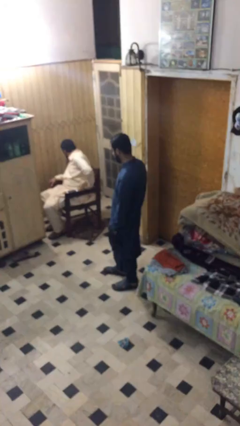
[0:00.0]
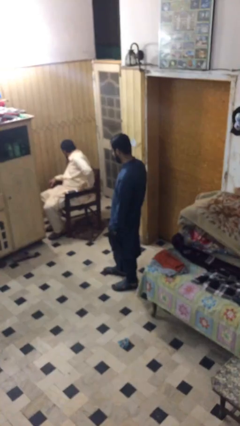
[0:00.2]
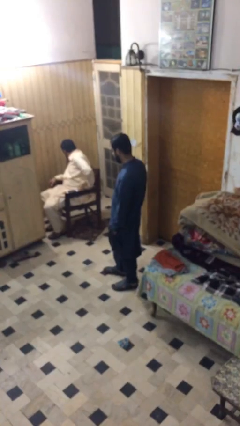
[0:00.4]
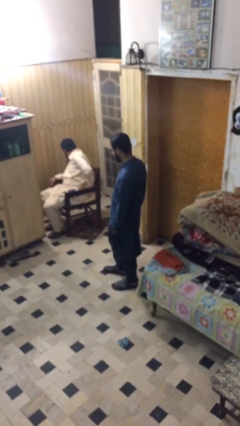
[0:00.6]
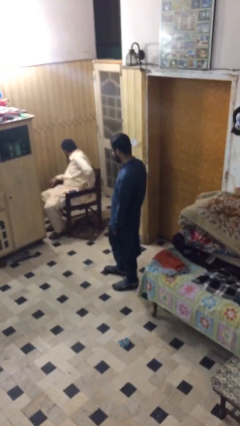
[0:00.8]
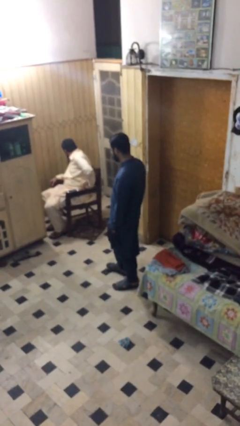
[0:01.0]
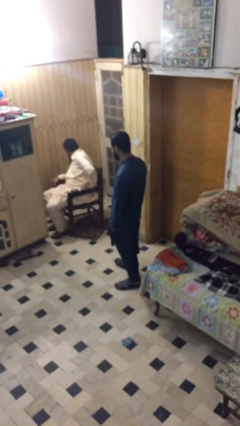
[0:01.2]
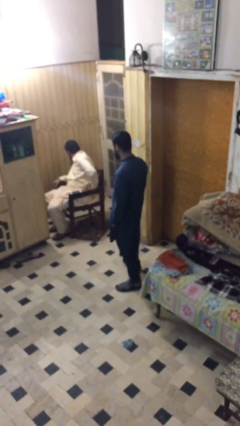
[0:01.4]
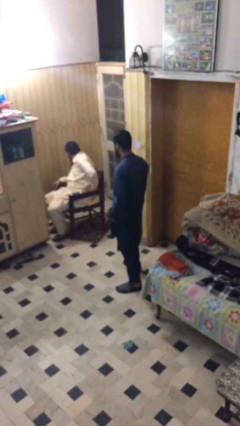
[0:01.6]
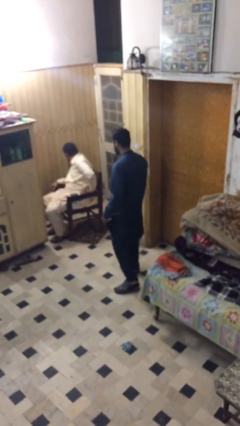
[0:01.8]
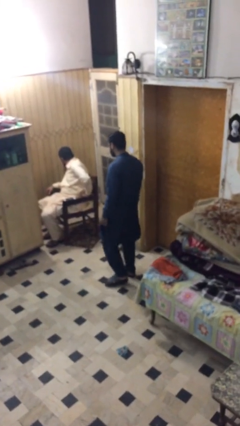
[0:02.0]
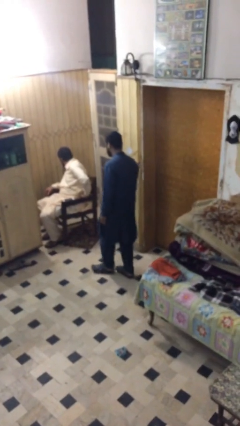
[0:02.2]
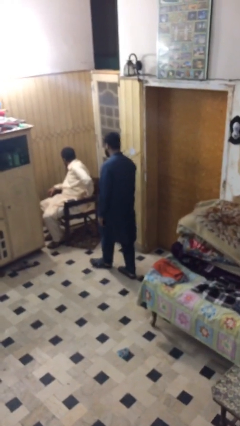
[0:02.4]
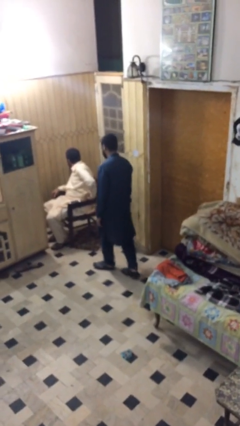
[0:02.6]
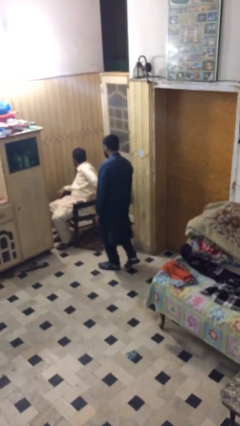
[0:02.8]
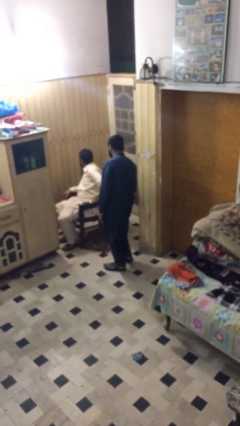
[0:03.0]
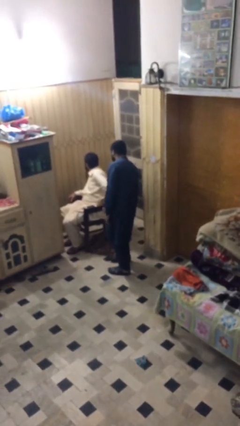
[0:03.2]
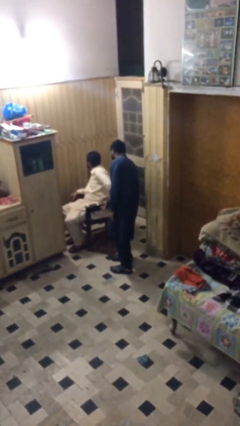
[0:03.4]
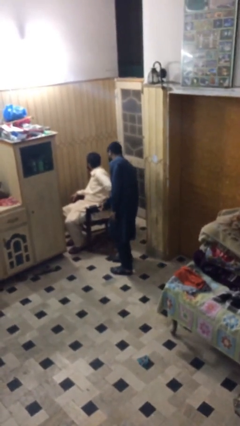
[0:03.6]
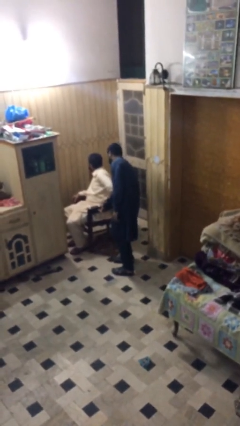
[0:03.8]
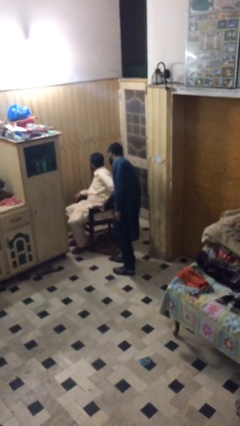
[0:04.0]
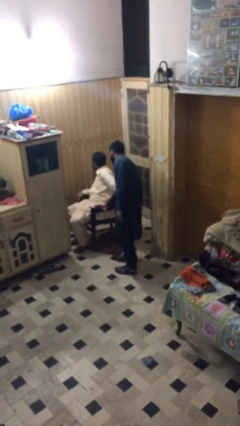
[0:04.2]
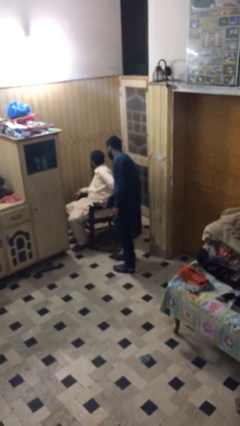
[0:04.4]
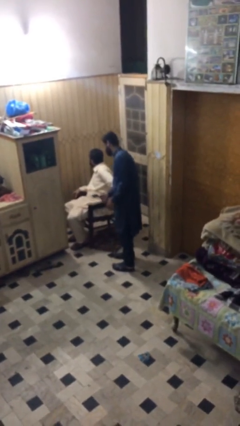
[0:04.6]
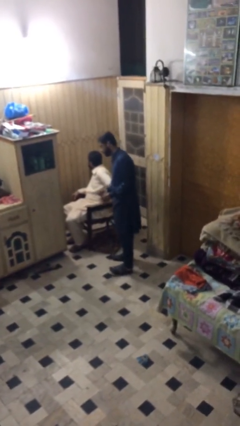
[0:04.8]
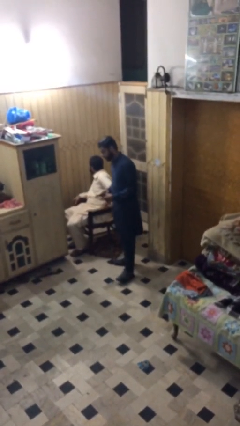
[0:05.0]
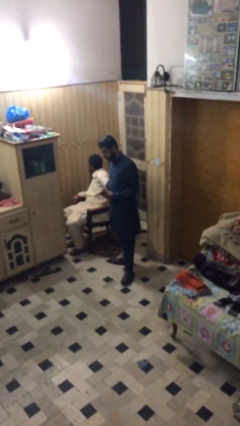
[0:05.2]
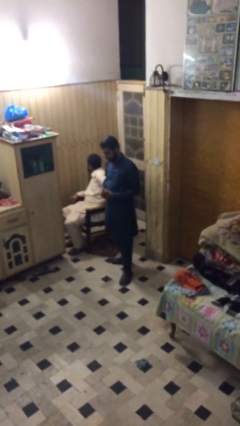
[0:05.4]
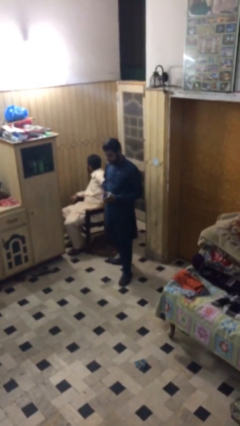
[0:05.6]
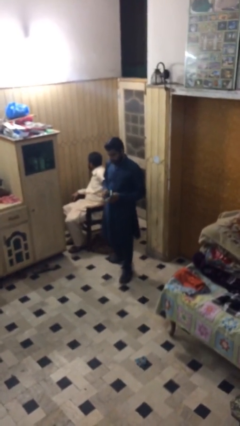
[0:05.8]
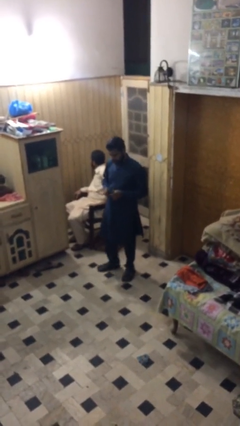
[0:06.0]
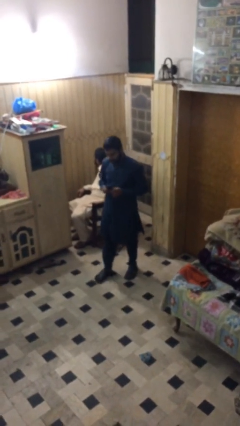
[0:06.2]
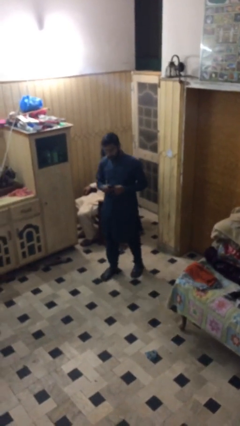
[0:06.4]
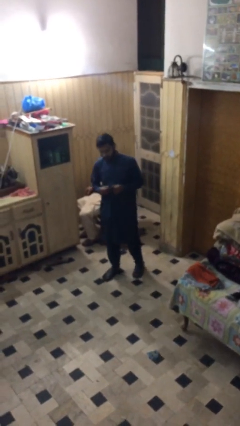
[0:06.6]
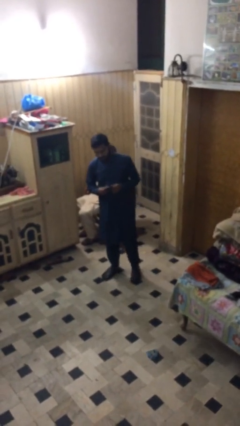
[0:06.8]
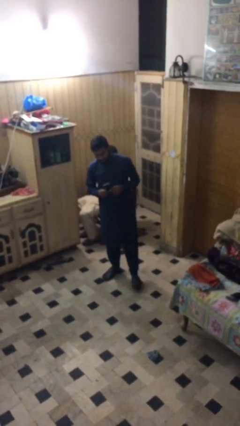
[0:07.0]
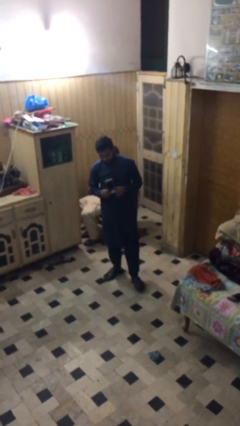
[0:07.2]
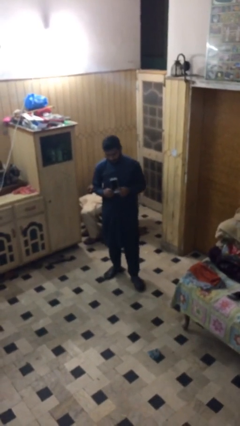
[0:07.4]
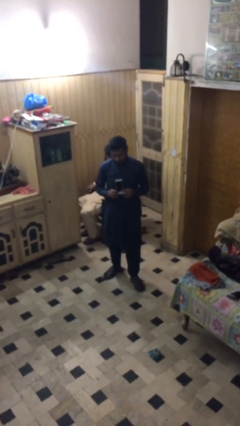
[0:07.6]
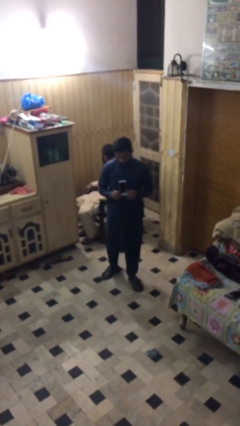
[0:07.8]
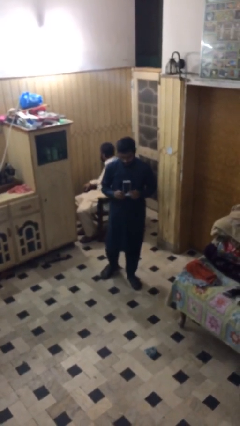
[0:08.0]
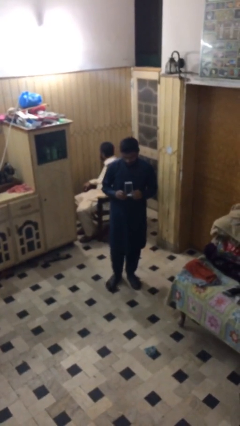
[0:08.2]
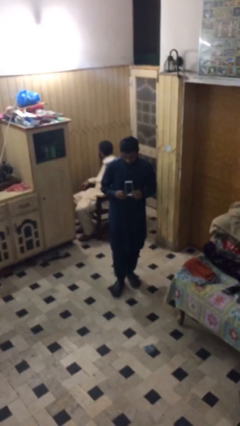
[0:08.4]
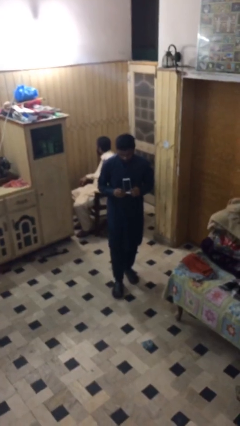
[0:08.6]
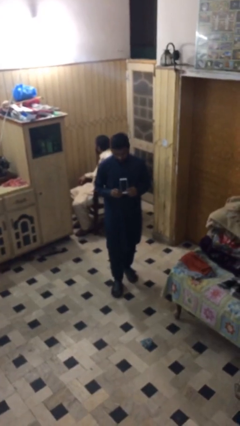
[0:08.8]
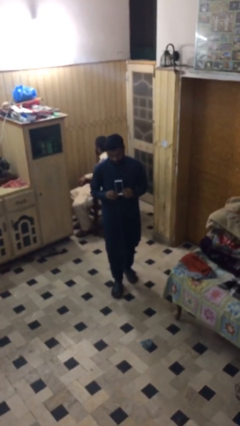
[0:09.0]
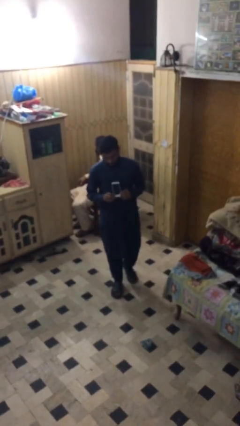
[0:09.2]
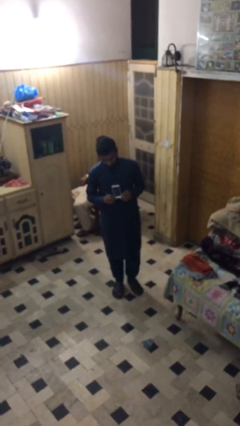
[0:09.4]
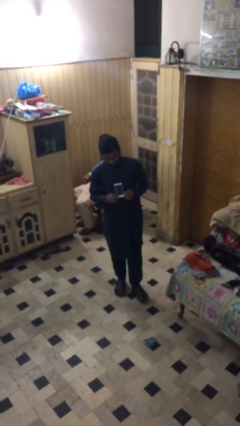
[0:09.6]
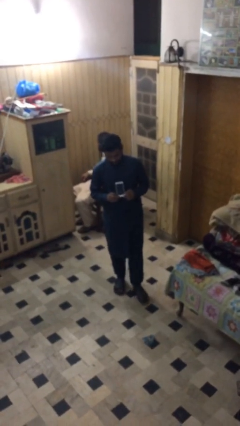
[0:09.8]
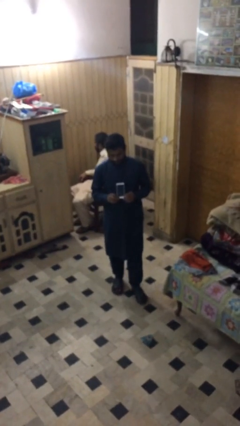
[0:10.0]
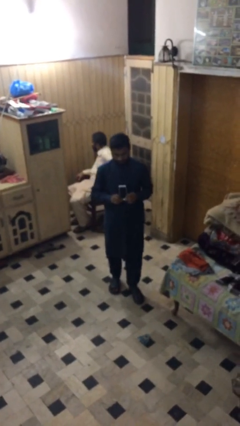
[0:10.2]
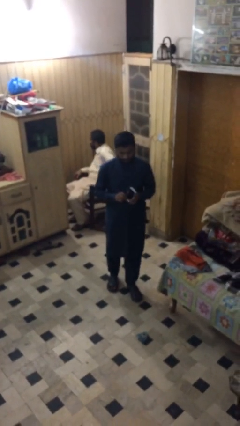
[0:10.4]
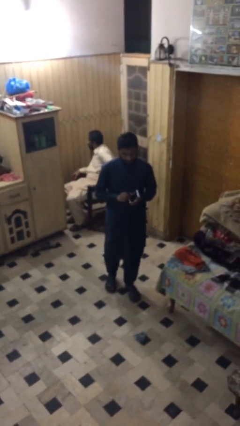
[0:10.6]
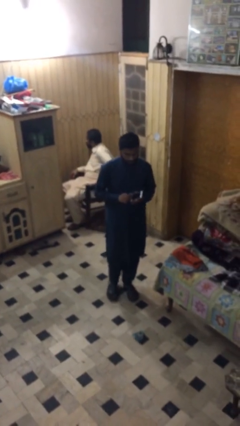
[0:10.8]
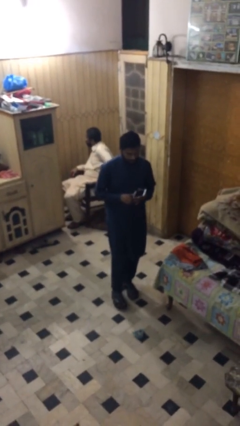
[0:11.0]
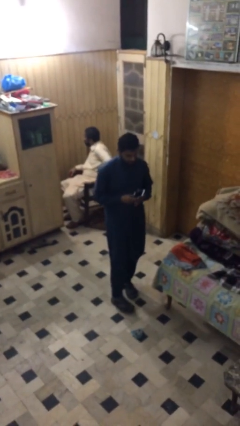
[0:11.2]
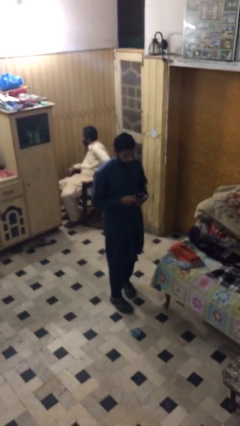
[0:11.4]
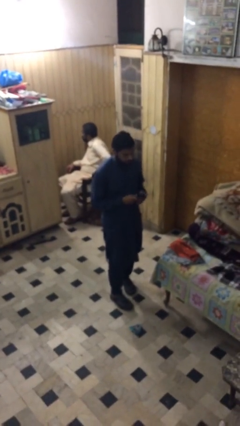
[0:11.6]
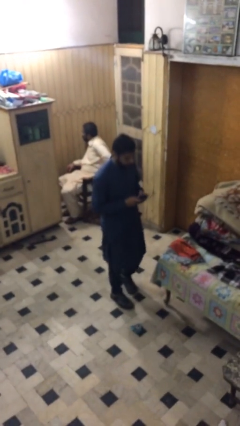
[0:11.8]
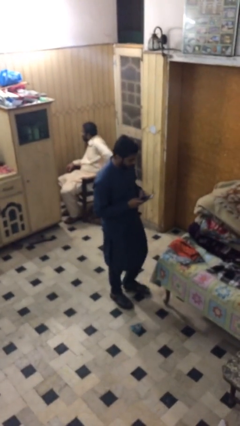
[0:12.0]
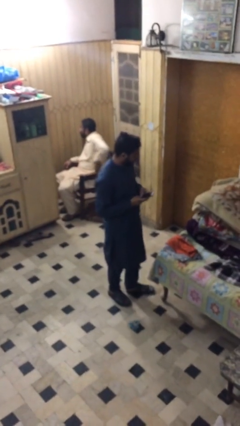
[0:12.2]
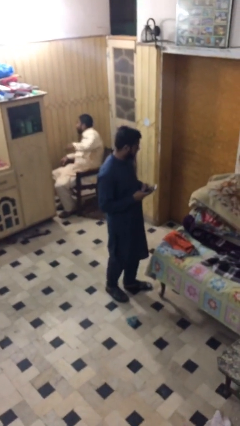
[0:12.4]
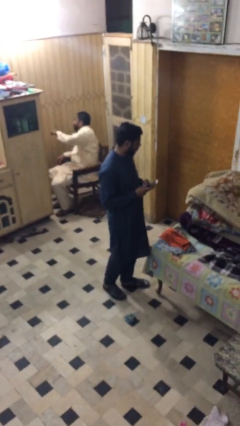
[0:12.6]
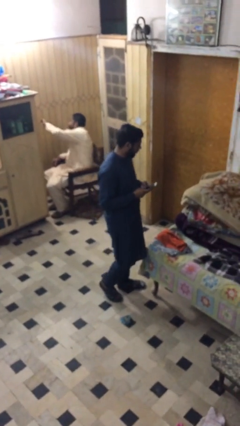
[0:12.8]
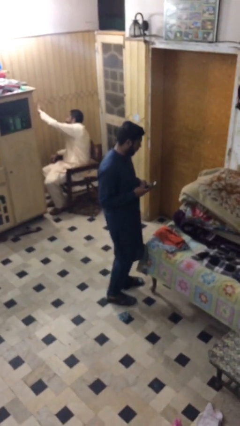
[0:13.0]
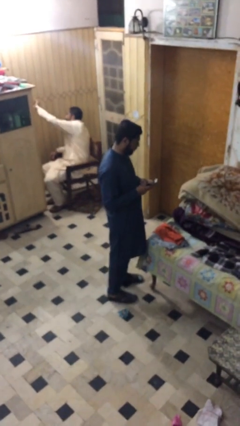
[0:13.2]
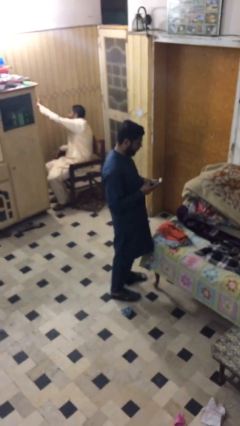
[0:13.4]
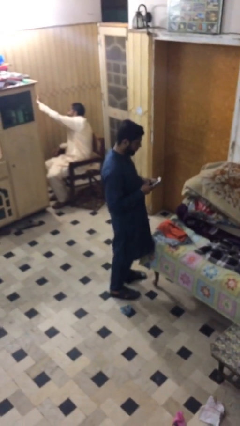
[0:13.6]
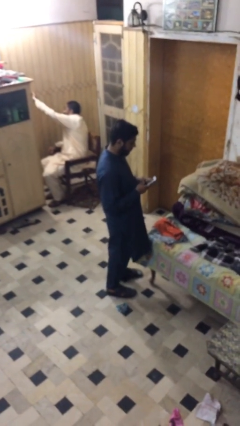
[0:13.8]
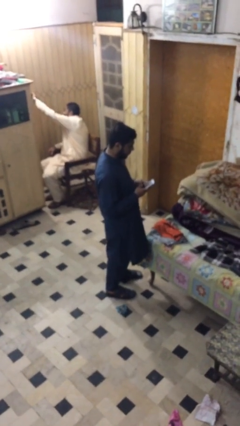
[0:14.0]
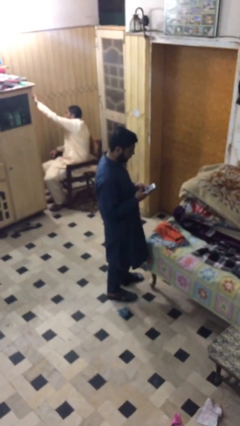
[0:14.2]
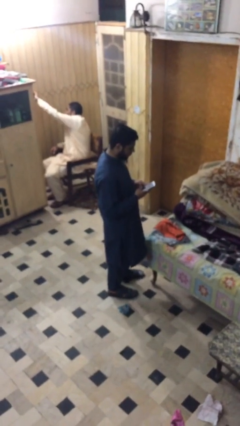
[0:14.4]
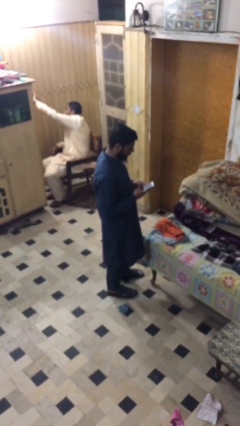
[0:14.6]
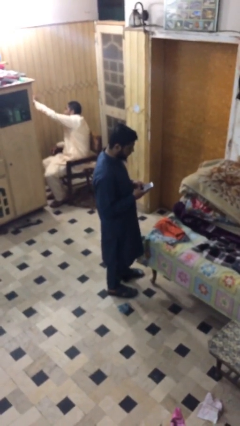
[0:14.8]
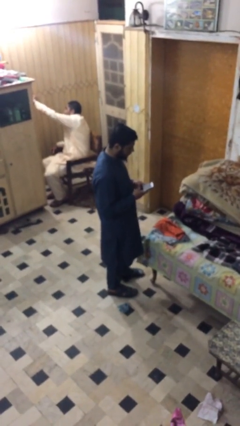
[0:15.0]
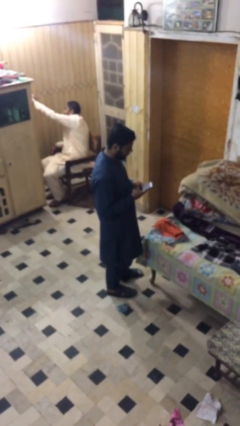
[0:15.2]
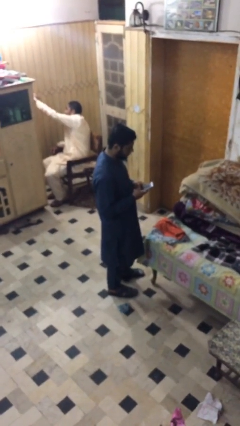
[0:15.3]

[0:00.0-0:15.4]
person steals object from person

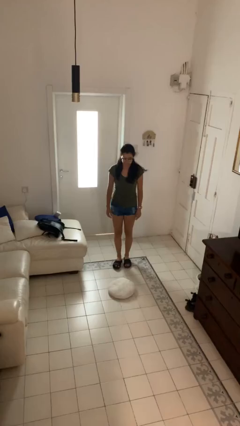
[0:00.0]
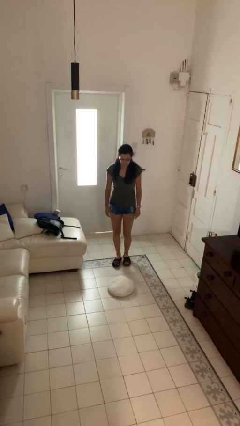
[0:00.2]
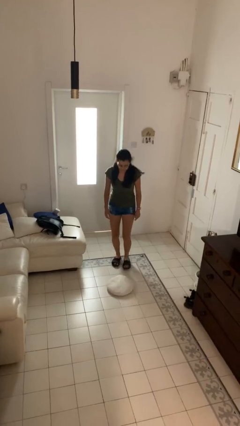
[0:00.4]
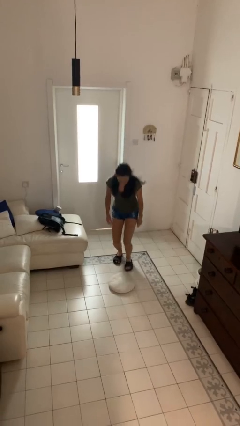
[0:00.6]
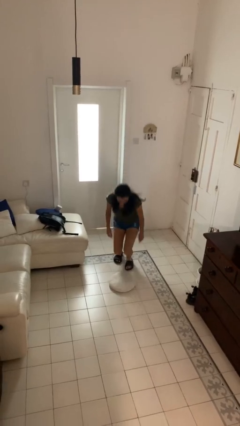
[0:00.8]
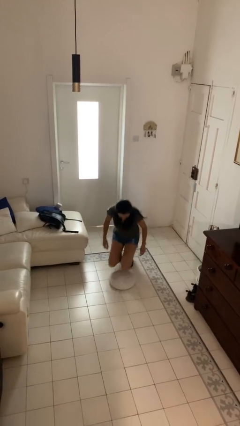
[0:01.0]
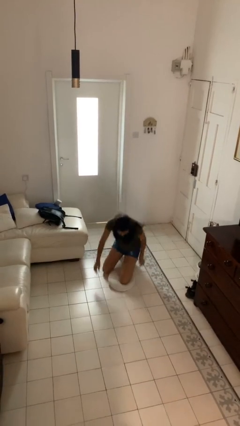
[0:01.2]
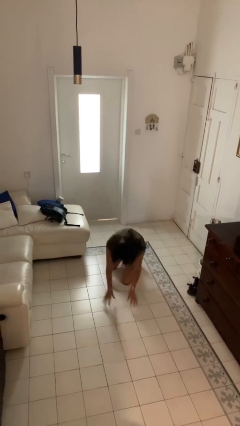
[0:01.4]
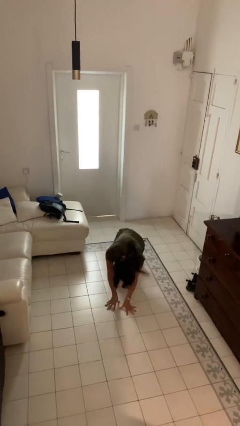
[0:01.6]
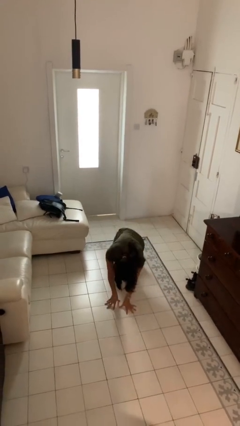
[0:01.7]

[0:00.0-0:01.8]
person trips on object on floor
